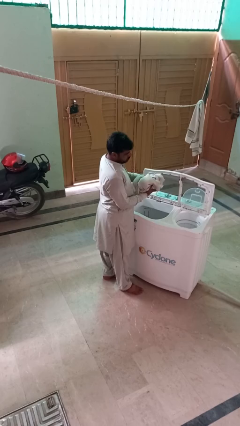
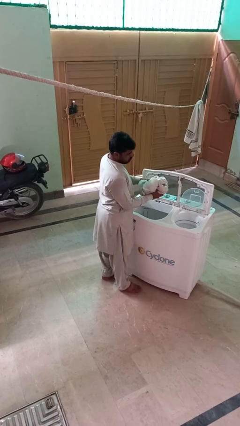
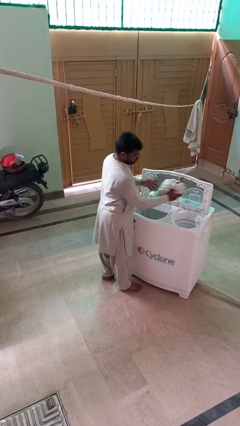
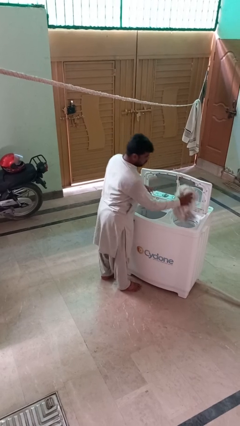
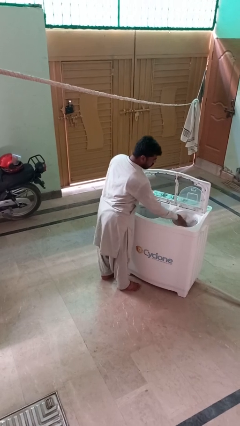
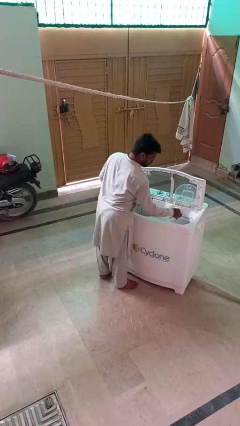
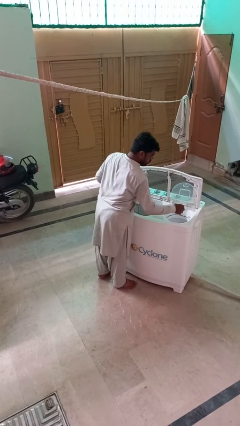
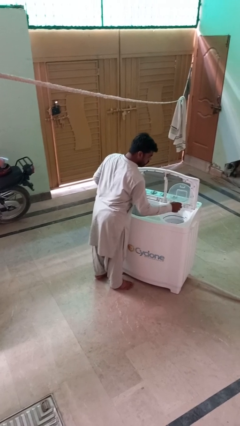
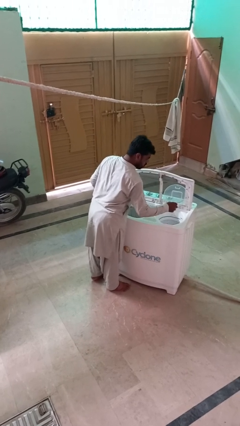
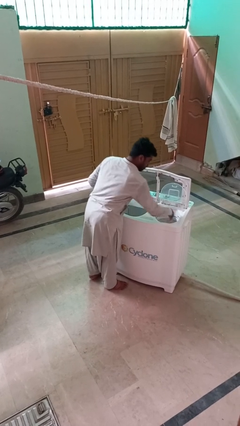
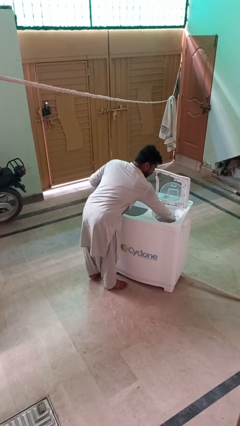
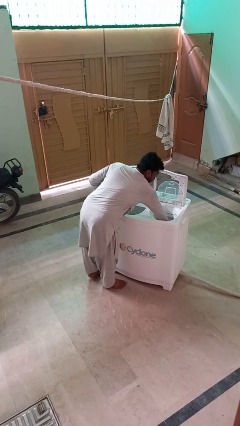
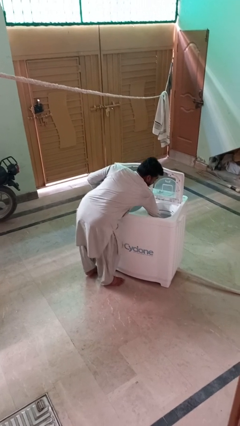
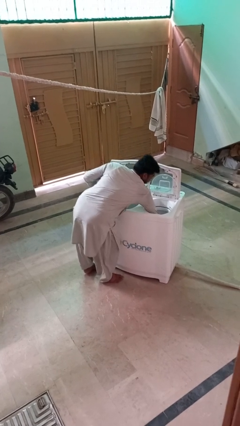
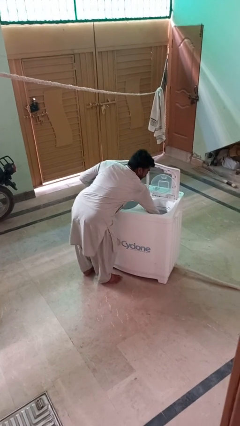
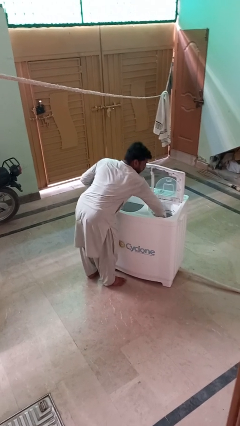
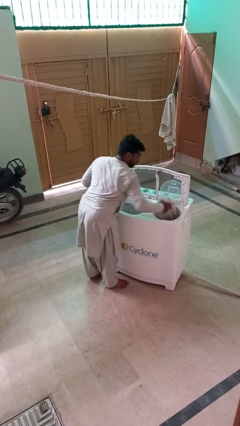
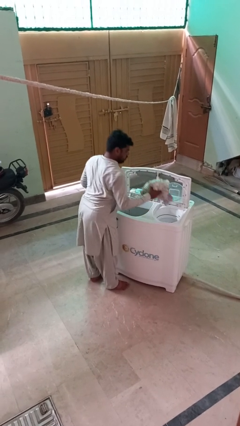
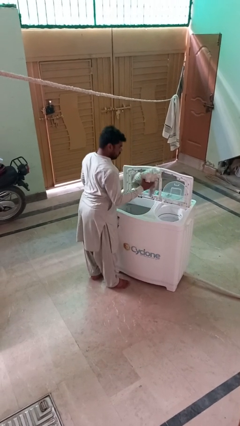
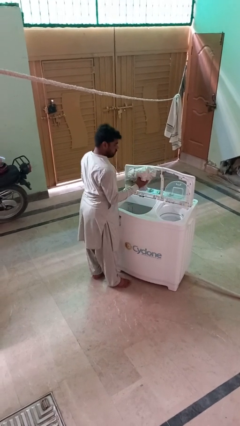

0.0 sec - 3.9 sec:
person loads dryer

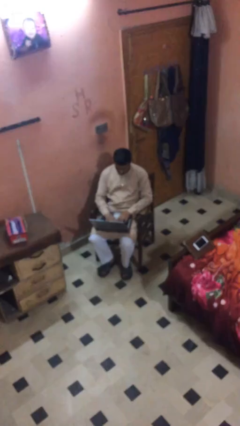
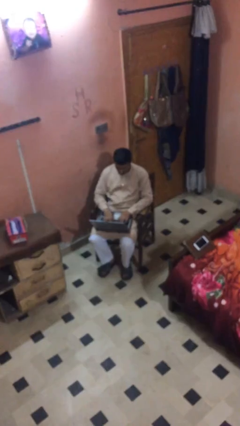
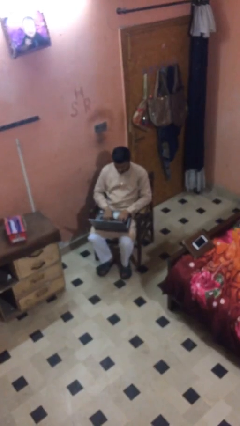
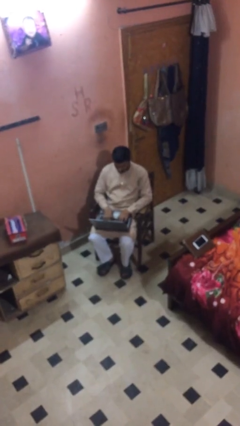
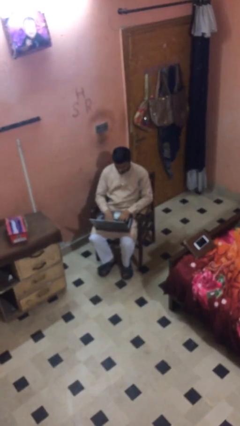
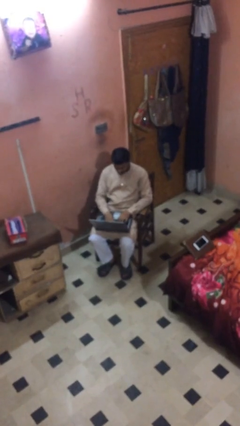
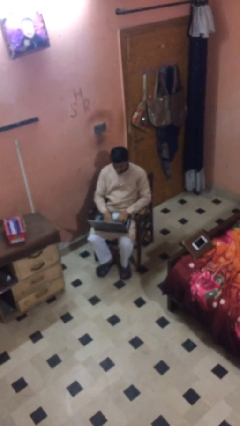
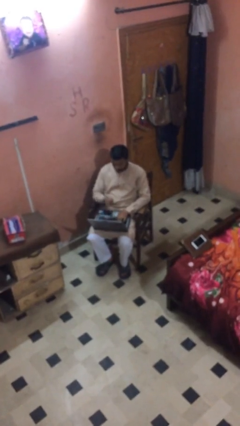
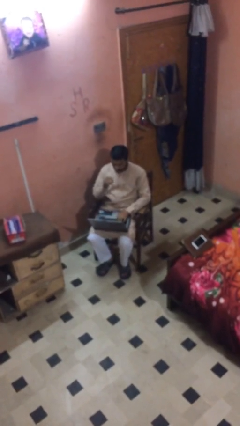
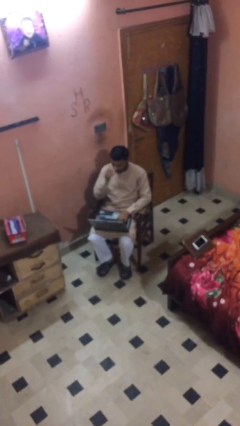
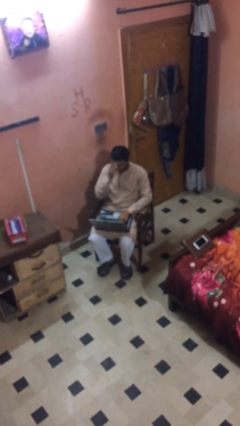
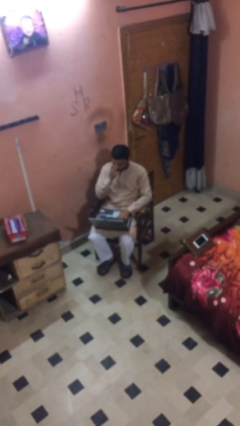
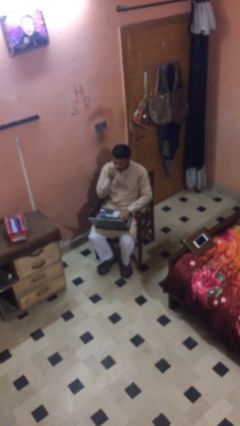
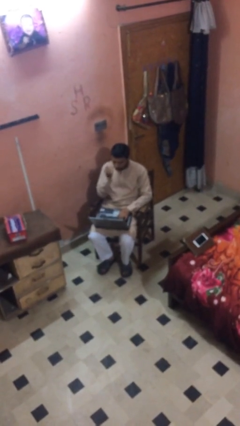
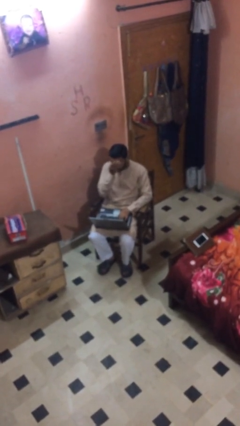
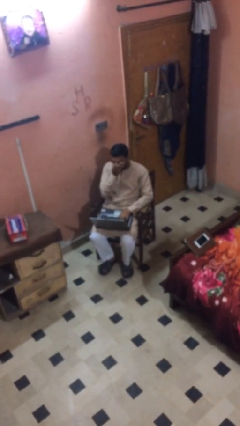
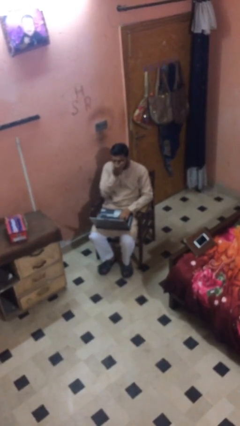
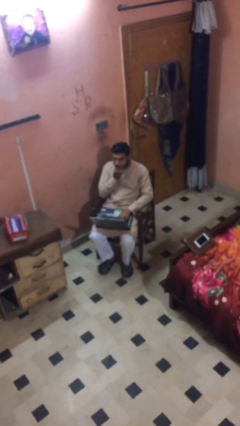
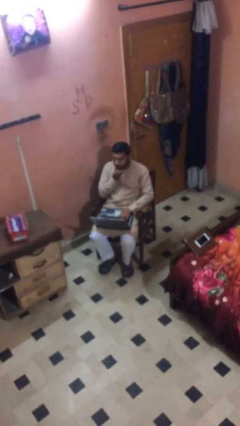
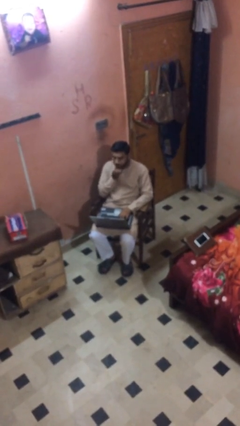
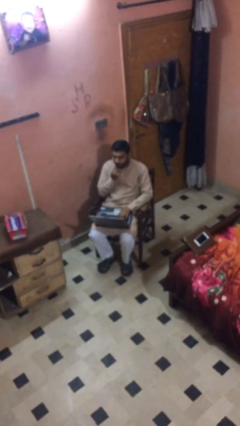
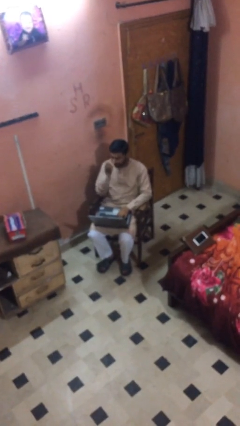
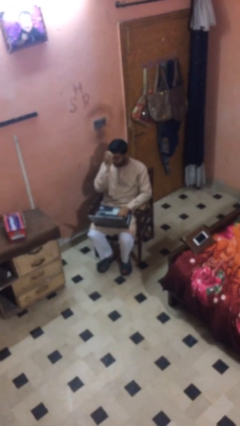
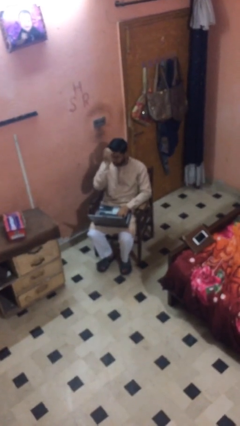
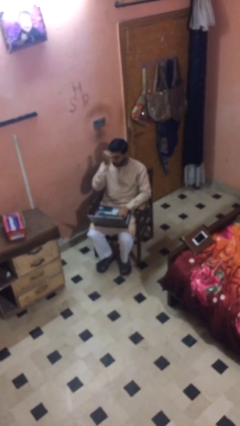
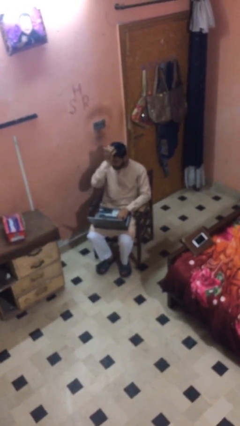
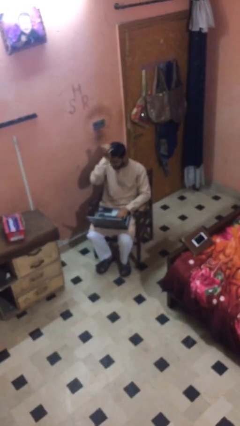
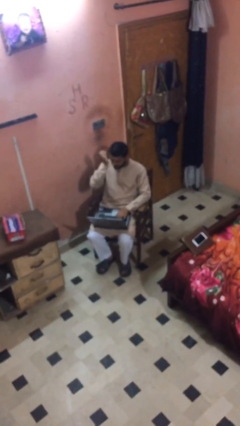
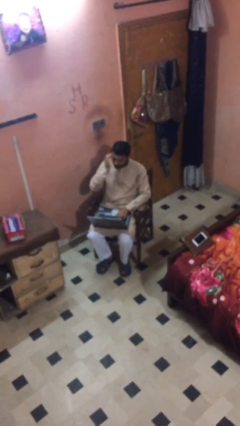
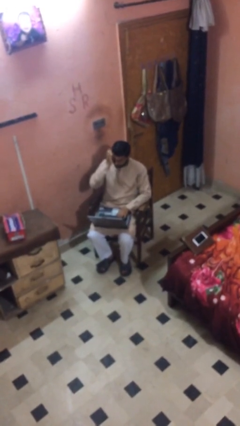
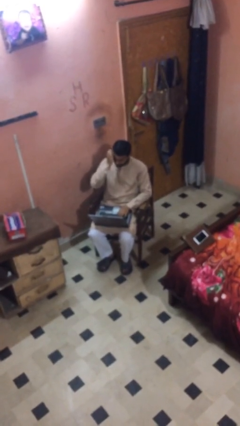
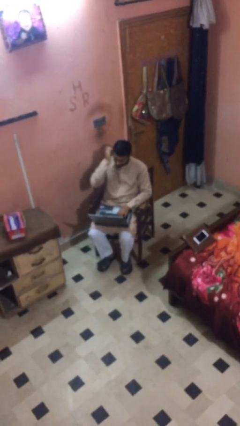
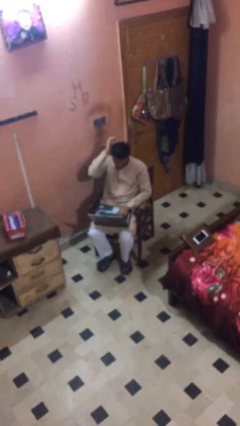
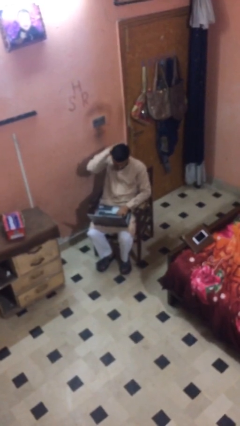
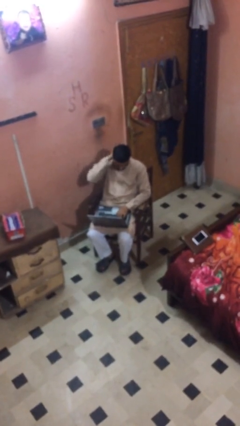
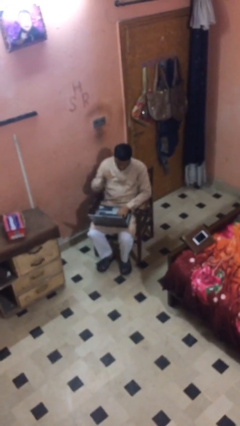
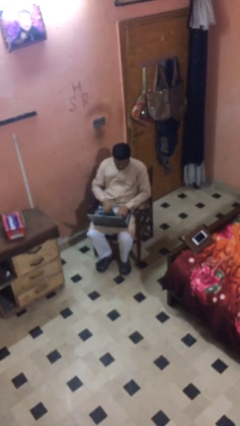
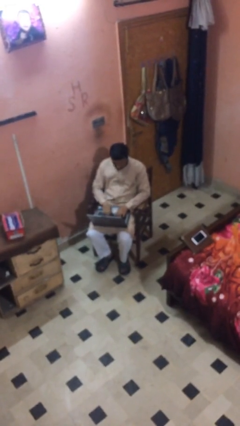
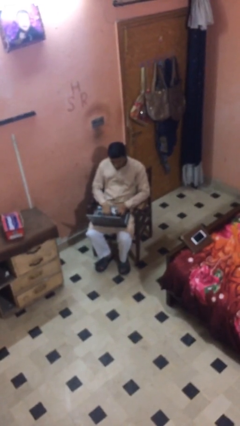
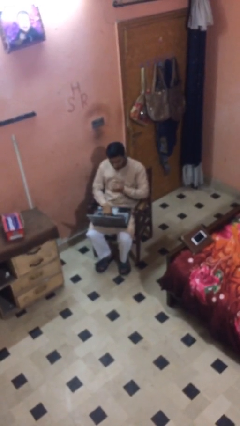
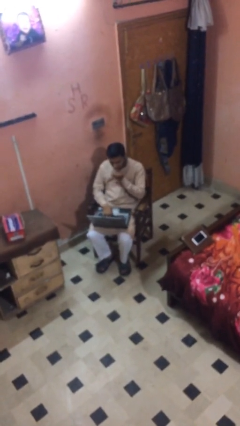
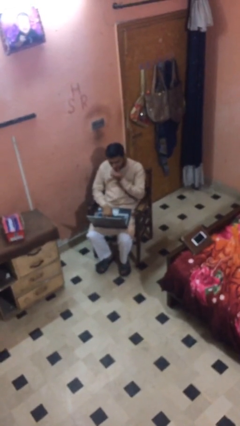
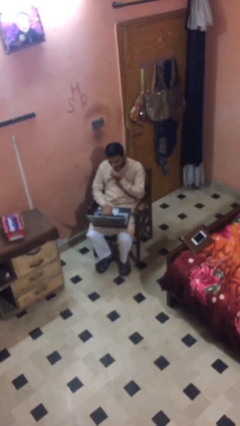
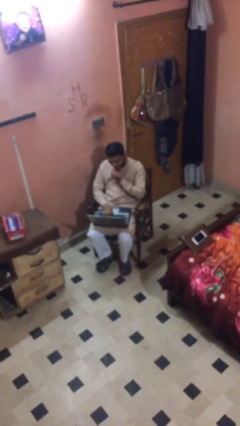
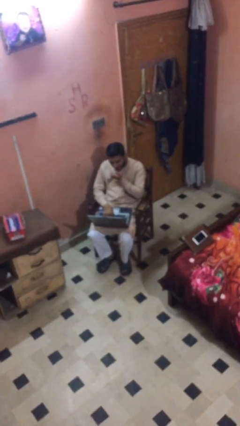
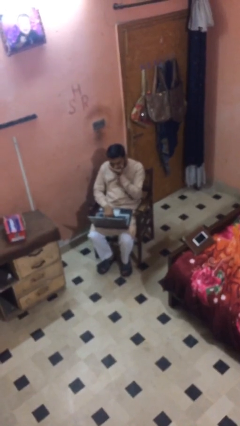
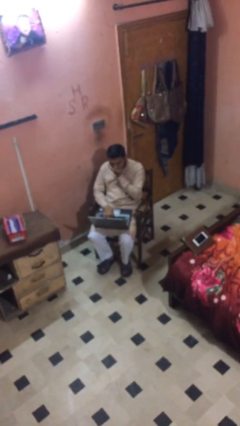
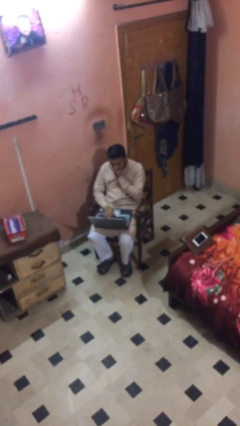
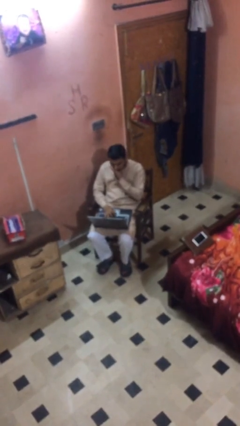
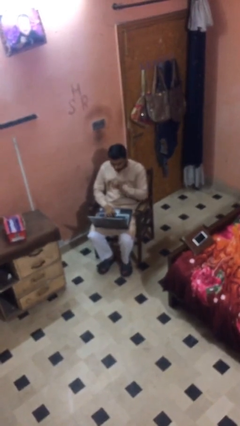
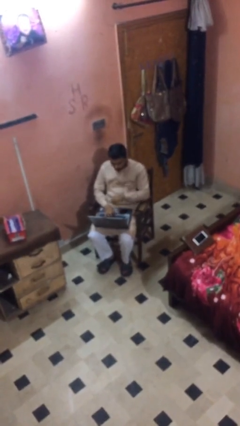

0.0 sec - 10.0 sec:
person interacts with laptop

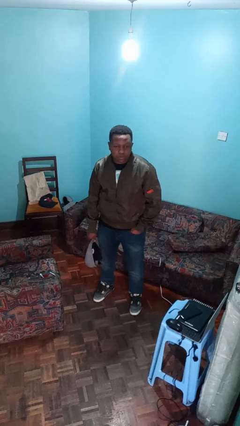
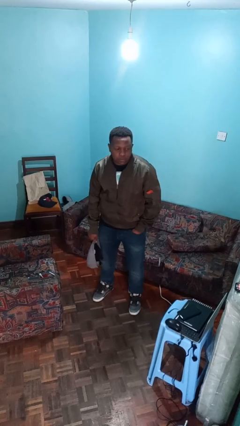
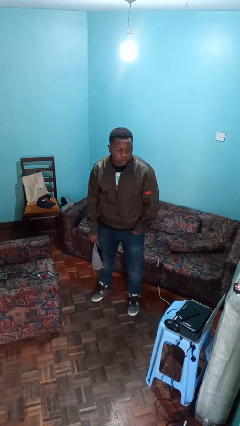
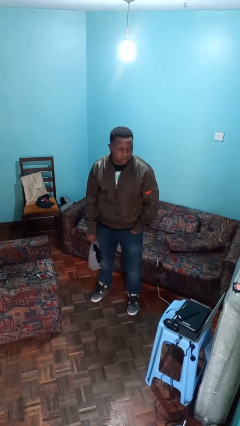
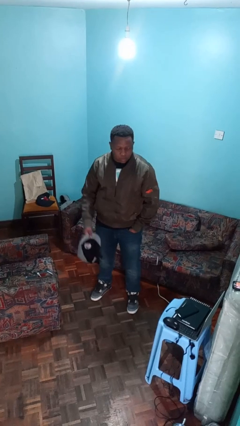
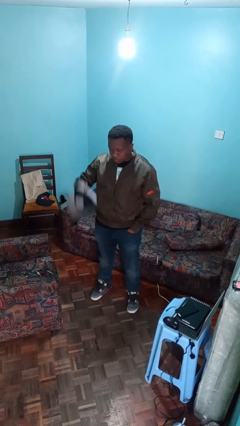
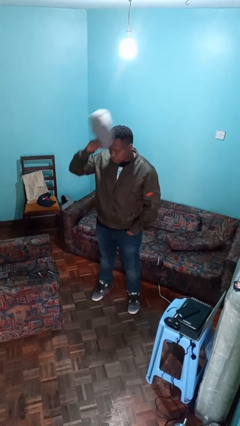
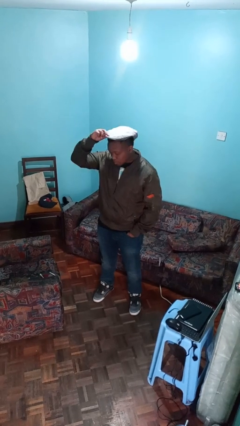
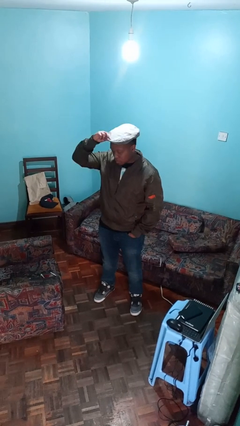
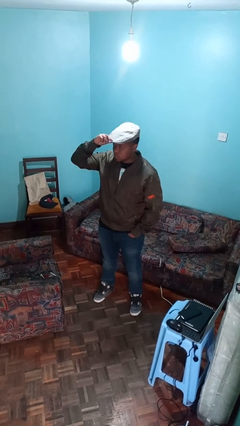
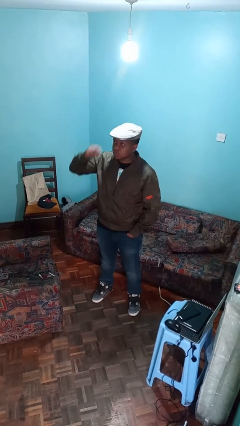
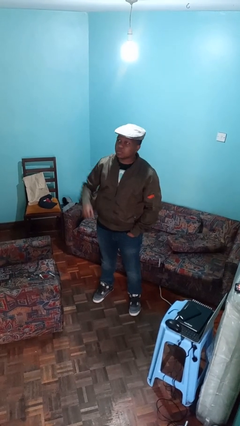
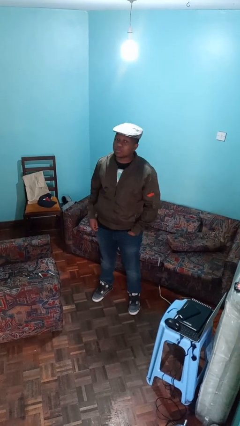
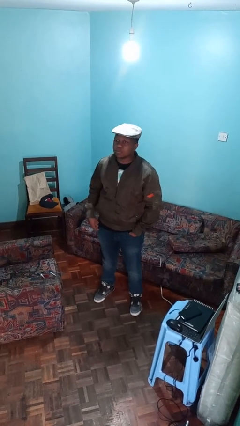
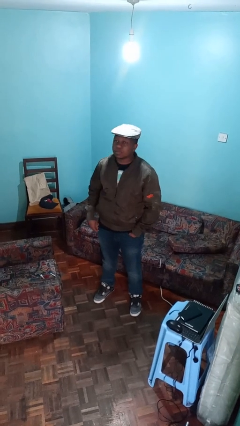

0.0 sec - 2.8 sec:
person puts on hat

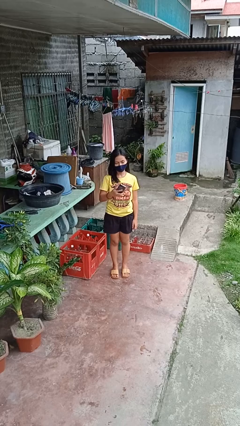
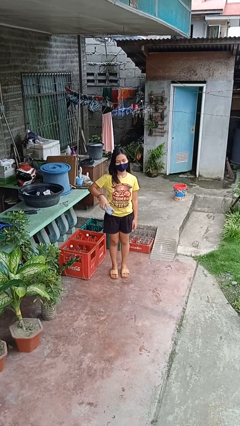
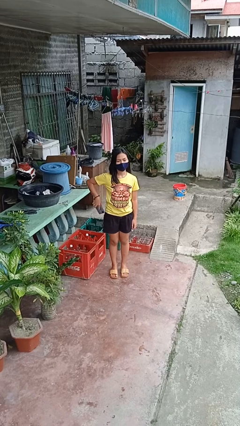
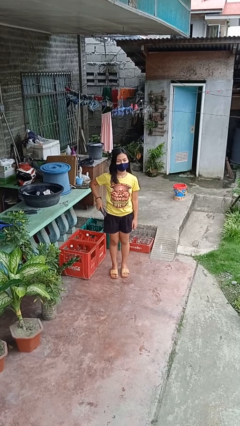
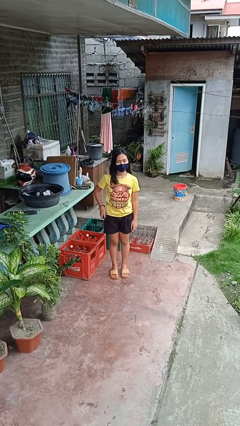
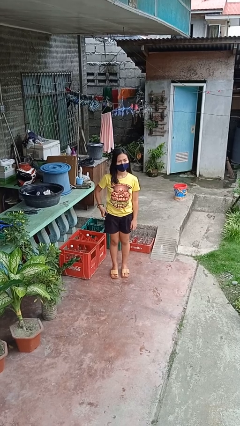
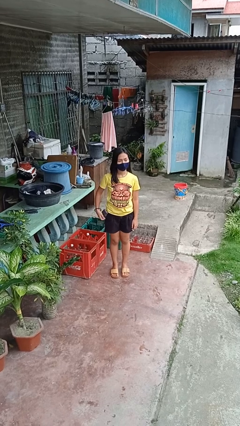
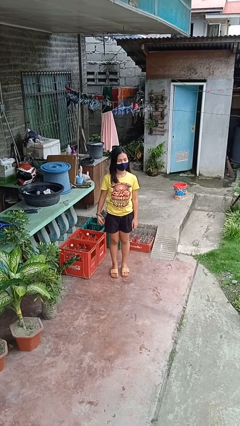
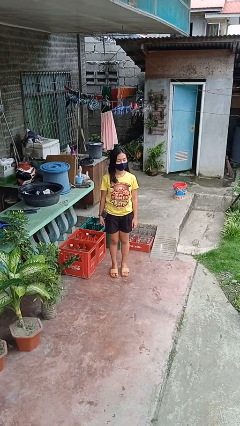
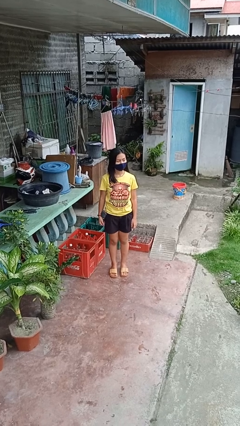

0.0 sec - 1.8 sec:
person puts phone into pocket
